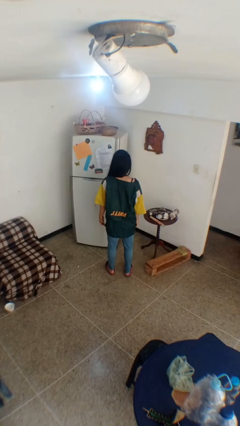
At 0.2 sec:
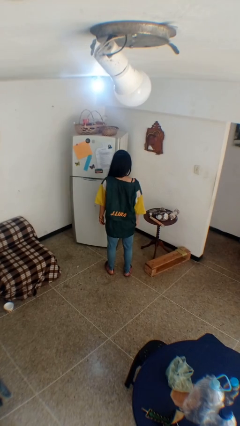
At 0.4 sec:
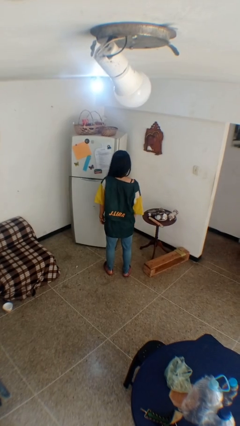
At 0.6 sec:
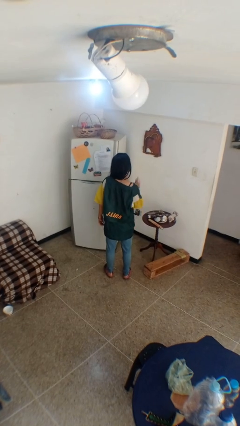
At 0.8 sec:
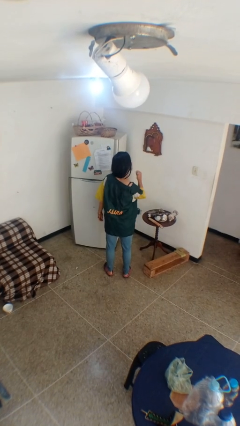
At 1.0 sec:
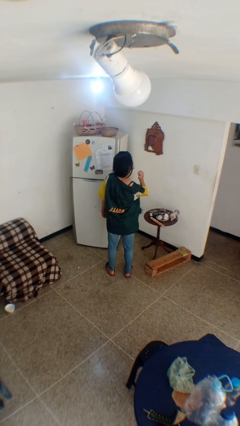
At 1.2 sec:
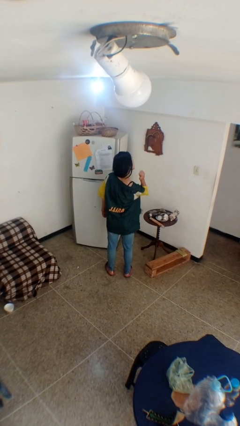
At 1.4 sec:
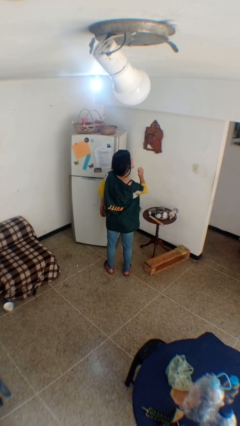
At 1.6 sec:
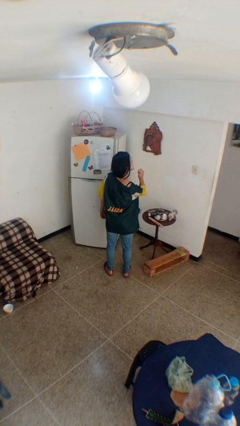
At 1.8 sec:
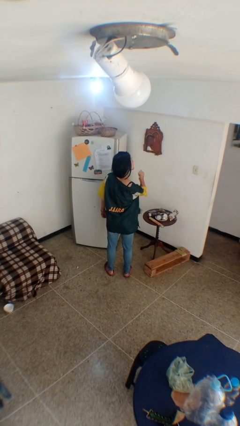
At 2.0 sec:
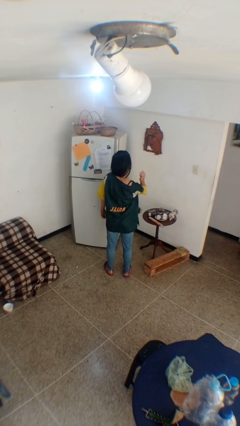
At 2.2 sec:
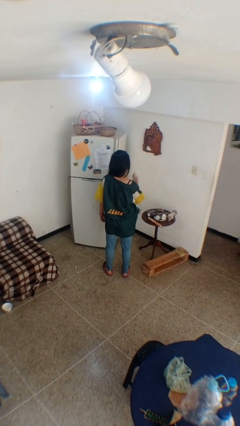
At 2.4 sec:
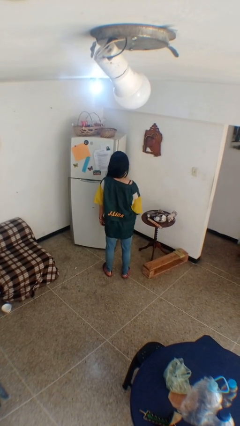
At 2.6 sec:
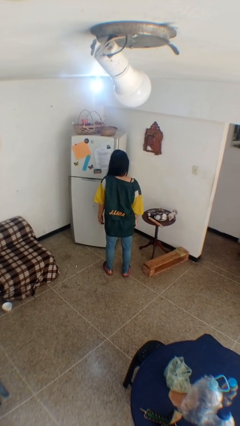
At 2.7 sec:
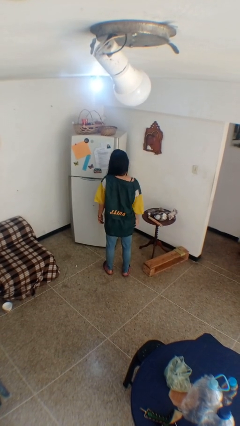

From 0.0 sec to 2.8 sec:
person gestures behind me

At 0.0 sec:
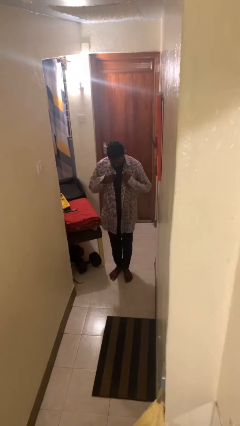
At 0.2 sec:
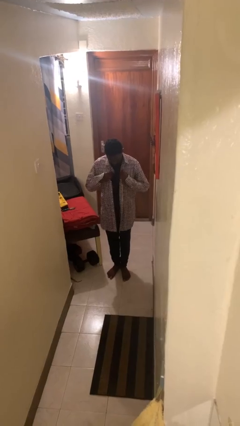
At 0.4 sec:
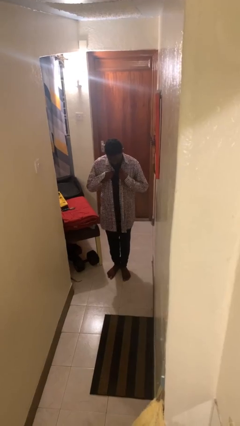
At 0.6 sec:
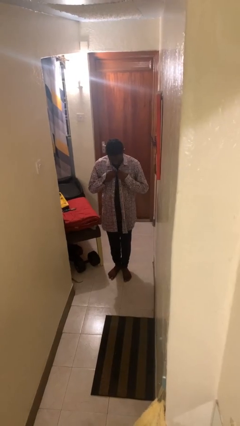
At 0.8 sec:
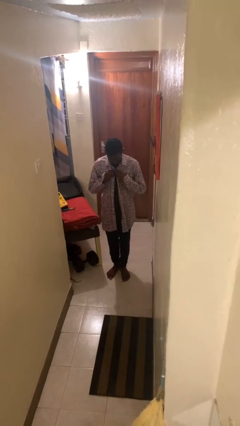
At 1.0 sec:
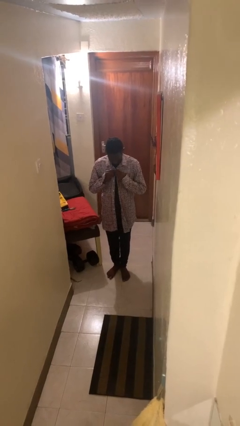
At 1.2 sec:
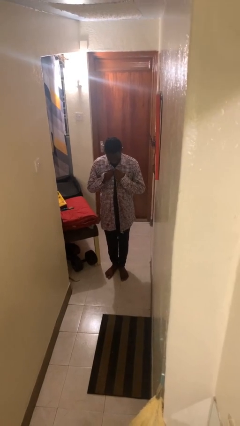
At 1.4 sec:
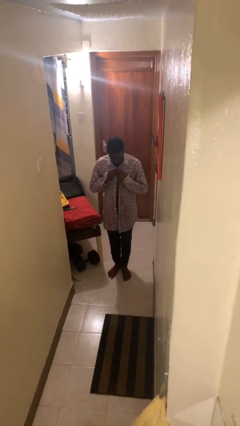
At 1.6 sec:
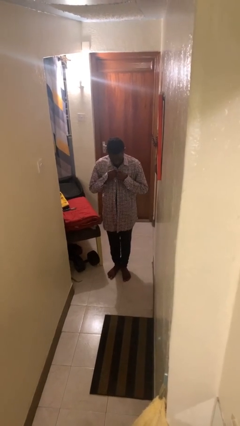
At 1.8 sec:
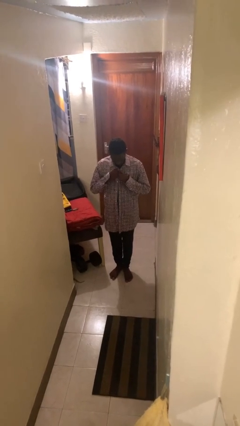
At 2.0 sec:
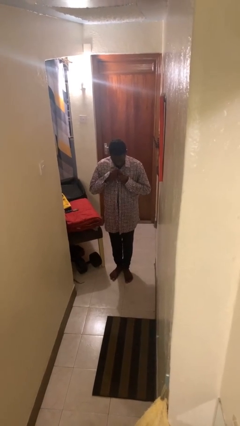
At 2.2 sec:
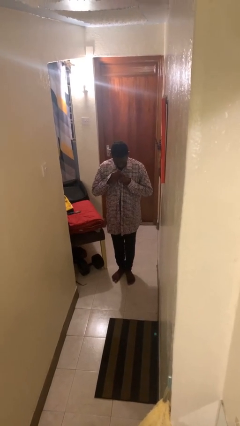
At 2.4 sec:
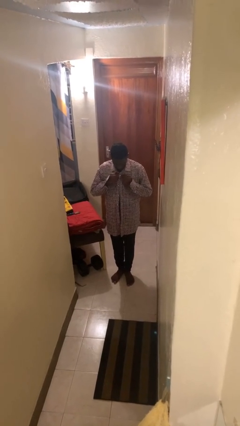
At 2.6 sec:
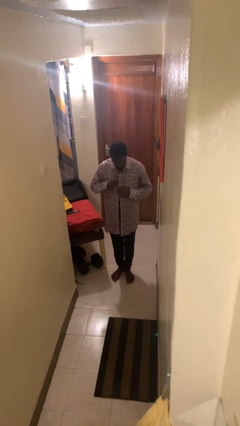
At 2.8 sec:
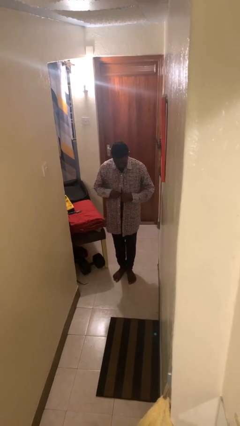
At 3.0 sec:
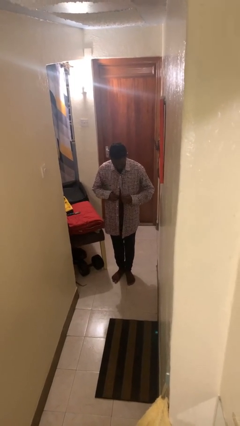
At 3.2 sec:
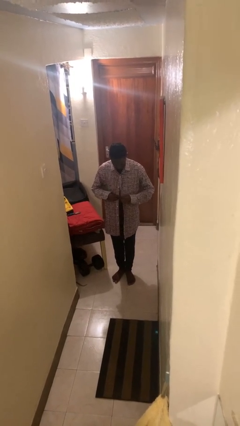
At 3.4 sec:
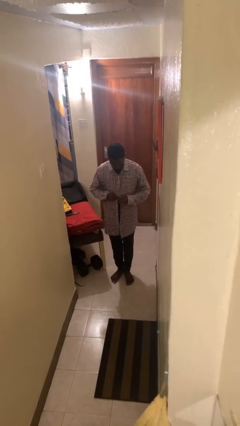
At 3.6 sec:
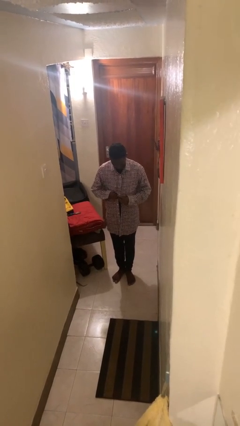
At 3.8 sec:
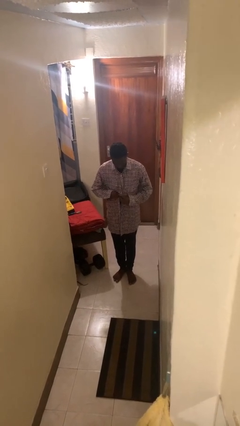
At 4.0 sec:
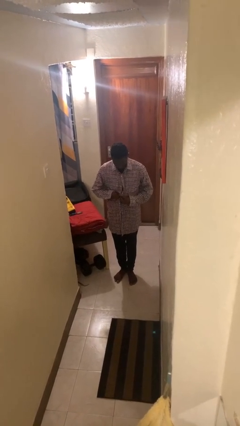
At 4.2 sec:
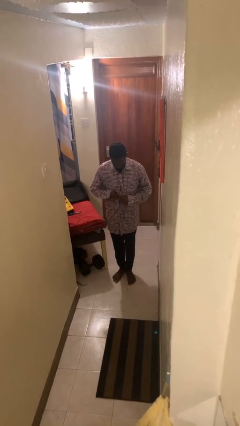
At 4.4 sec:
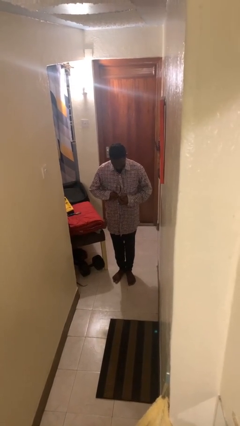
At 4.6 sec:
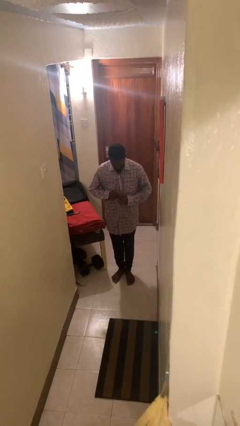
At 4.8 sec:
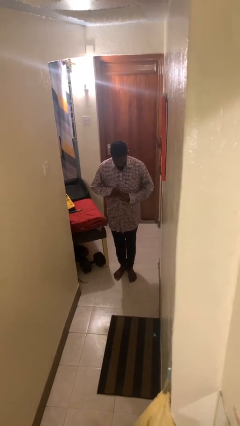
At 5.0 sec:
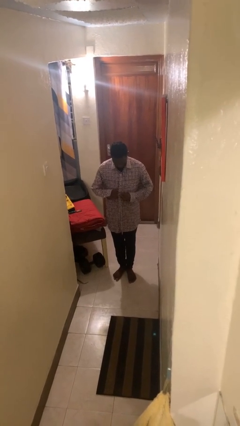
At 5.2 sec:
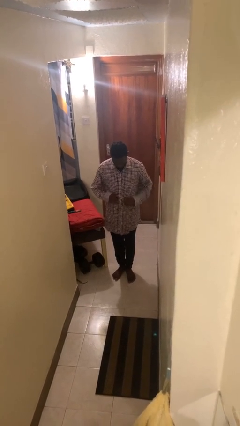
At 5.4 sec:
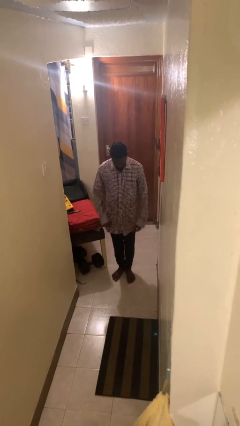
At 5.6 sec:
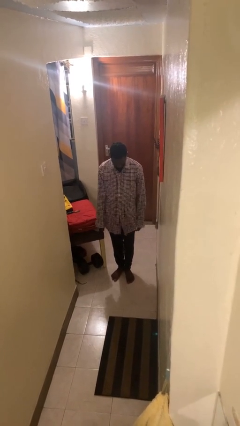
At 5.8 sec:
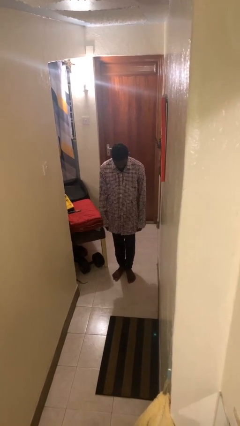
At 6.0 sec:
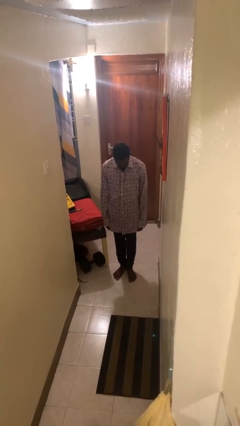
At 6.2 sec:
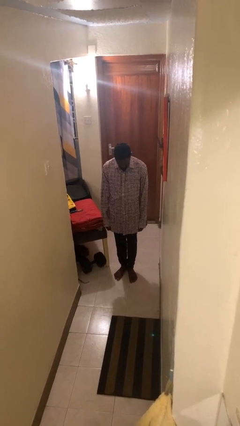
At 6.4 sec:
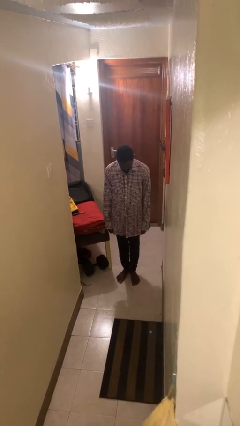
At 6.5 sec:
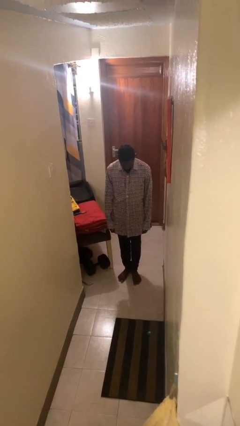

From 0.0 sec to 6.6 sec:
person buttons shirt

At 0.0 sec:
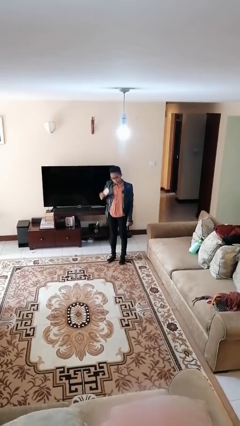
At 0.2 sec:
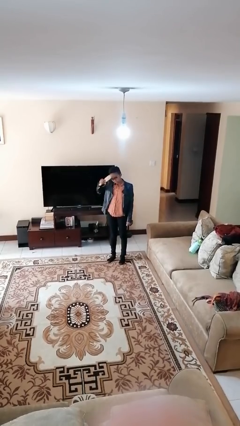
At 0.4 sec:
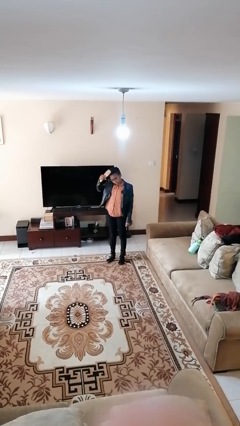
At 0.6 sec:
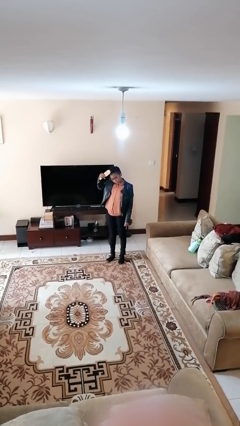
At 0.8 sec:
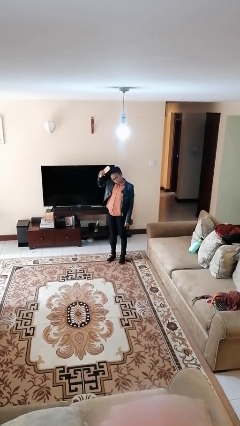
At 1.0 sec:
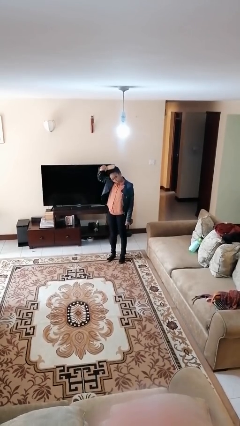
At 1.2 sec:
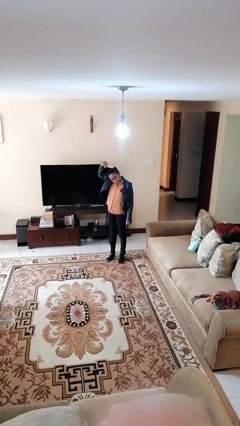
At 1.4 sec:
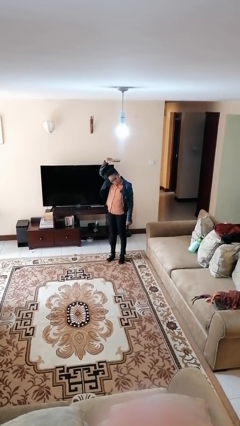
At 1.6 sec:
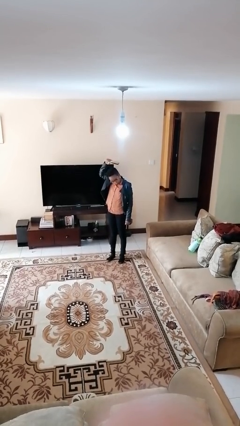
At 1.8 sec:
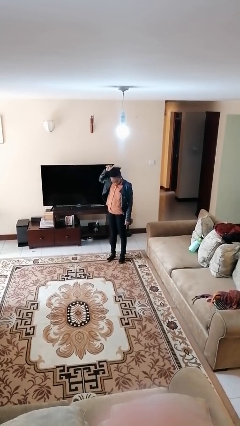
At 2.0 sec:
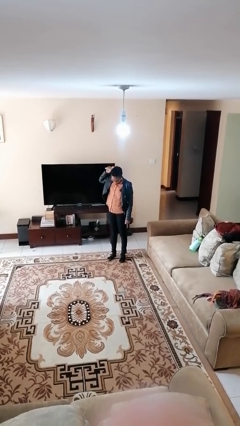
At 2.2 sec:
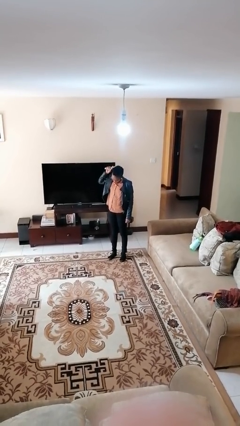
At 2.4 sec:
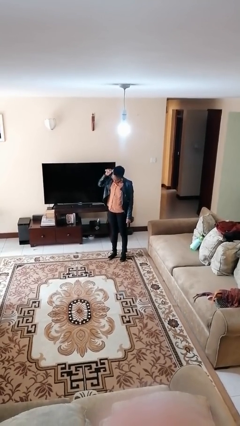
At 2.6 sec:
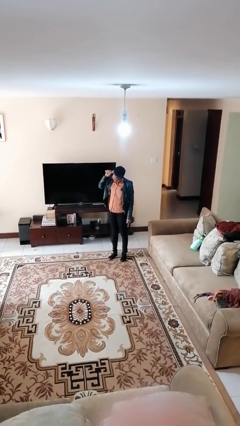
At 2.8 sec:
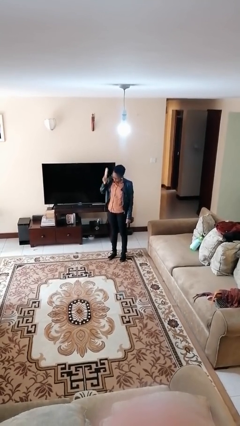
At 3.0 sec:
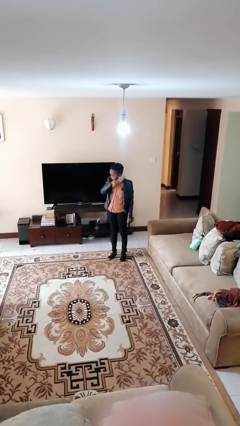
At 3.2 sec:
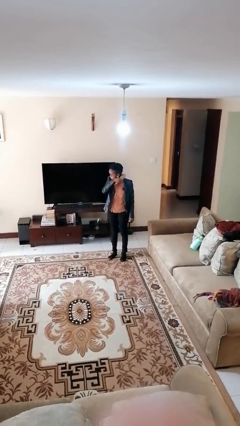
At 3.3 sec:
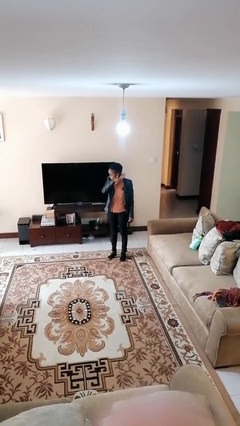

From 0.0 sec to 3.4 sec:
person brushes hair

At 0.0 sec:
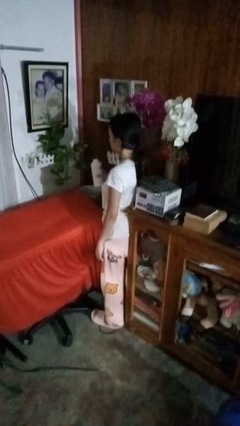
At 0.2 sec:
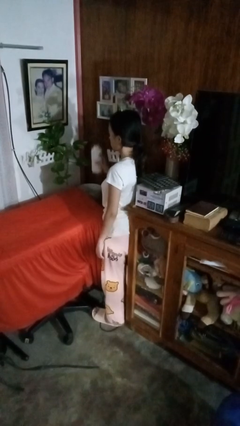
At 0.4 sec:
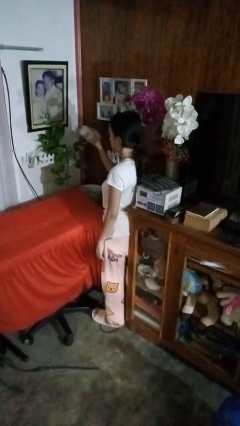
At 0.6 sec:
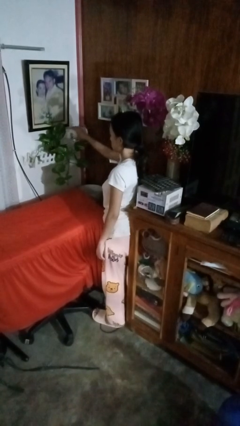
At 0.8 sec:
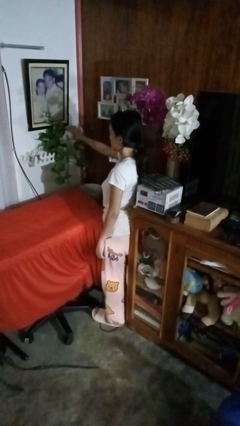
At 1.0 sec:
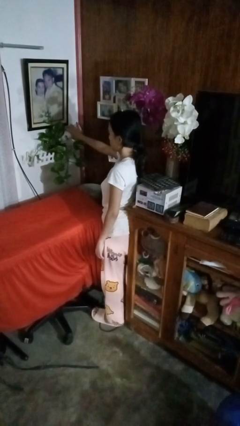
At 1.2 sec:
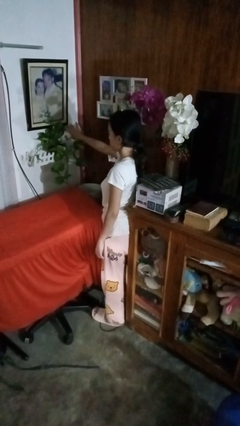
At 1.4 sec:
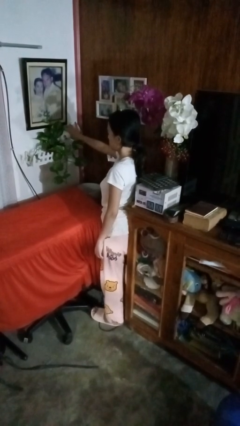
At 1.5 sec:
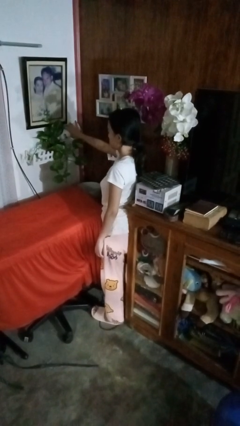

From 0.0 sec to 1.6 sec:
person waters houseplant

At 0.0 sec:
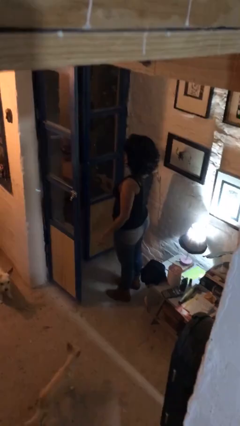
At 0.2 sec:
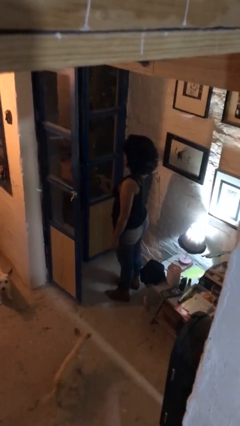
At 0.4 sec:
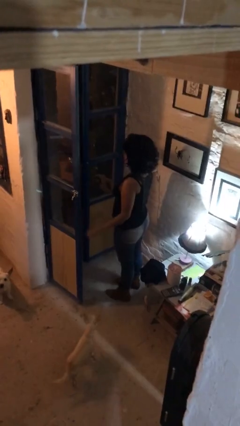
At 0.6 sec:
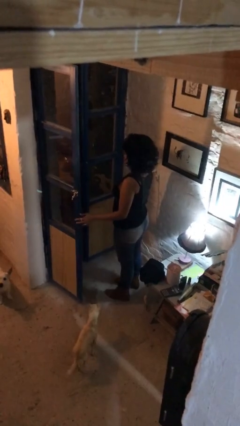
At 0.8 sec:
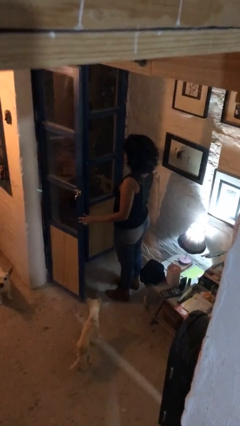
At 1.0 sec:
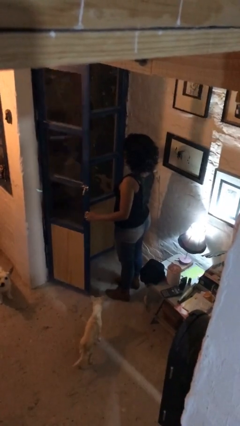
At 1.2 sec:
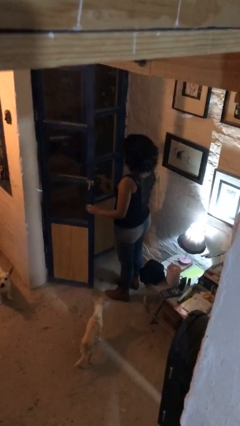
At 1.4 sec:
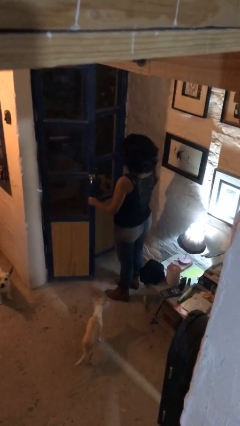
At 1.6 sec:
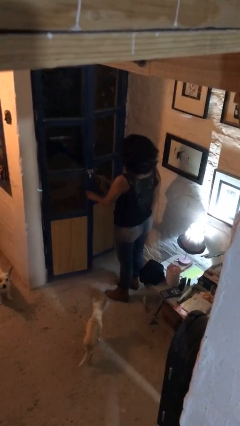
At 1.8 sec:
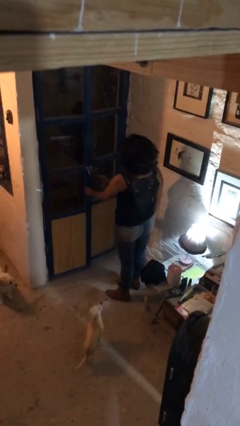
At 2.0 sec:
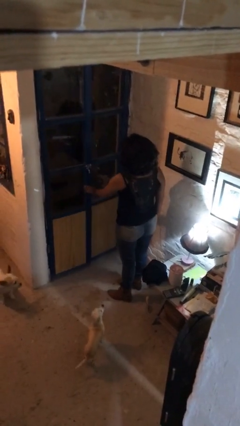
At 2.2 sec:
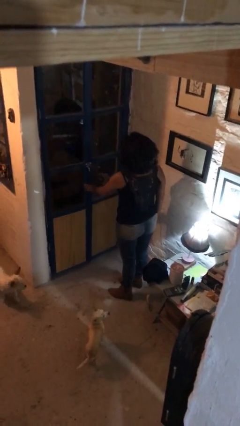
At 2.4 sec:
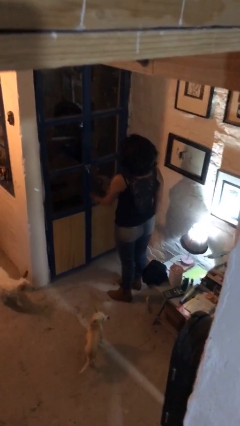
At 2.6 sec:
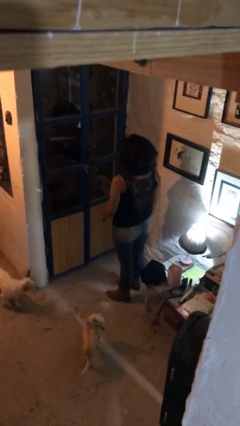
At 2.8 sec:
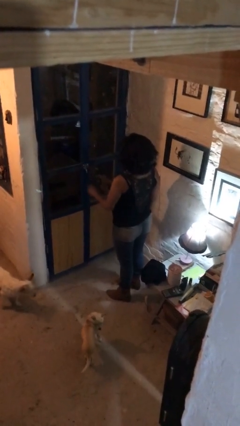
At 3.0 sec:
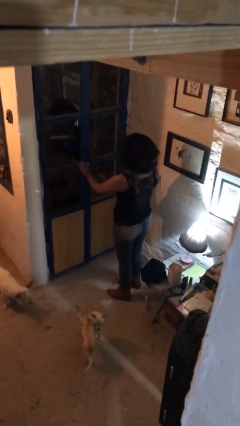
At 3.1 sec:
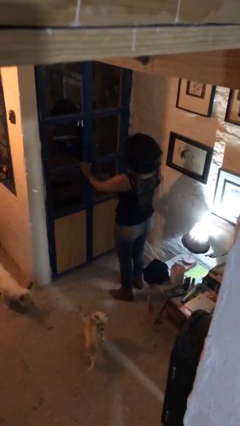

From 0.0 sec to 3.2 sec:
person closes facility door
